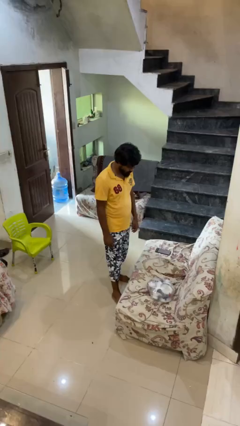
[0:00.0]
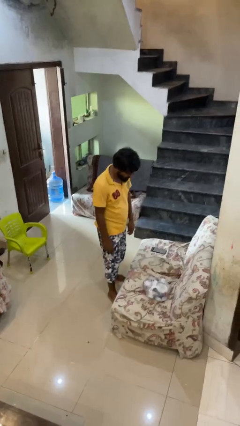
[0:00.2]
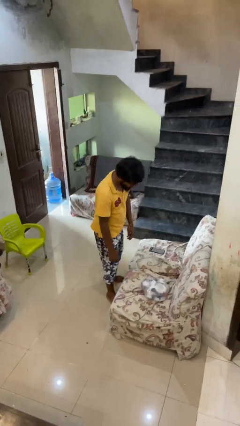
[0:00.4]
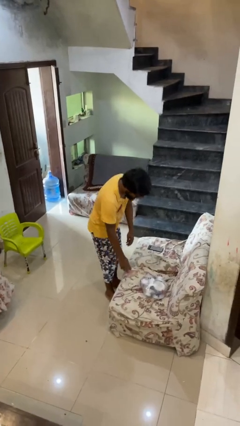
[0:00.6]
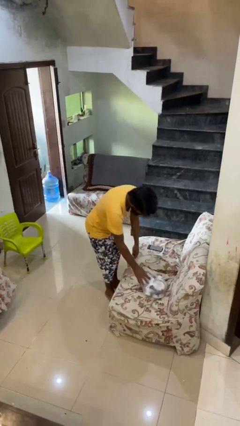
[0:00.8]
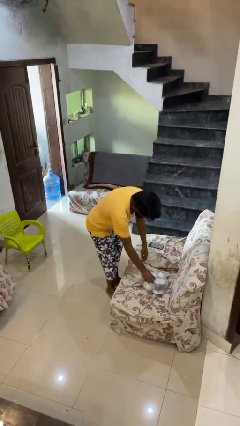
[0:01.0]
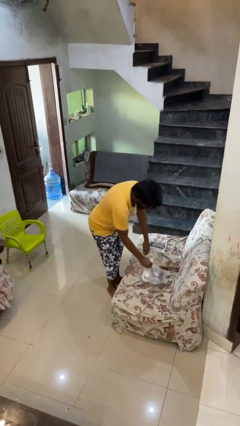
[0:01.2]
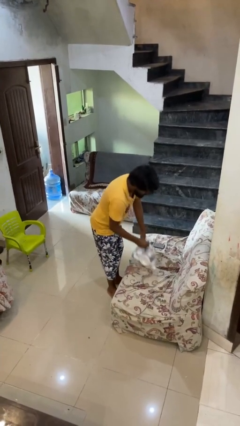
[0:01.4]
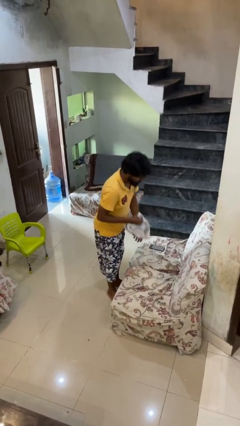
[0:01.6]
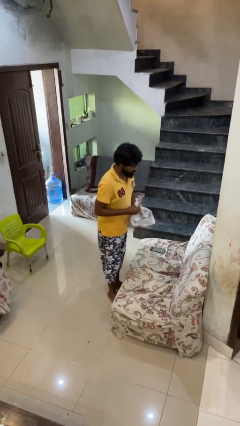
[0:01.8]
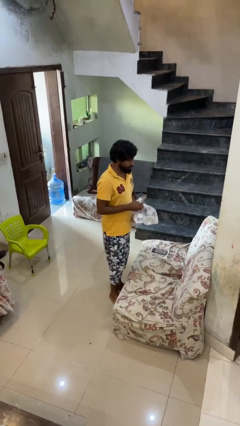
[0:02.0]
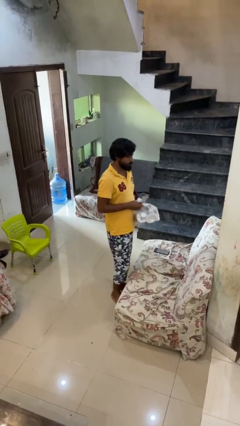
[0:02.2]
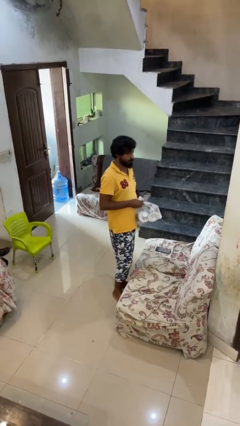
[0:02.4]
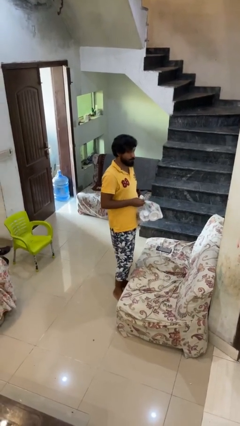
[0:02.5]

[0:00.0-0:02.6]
person picks up object from couch

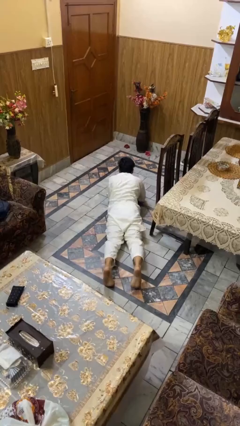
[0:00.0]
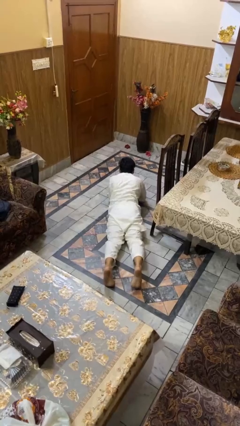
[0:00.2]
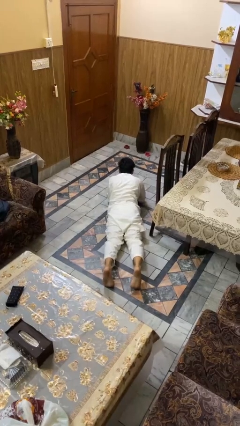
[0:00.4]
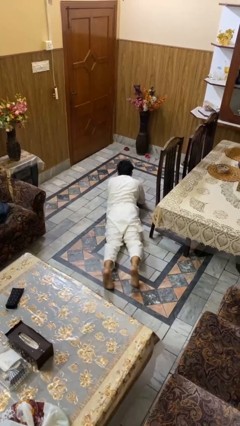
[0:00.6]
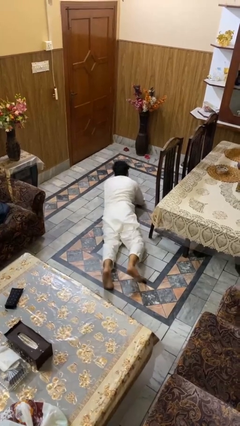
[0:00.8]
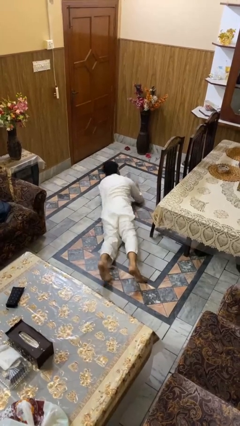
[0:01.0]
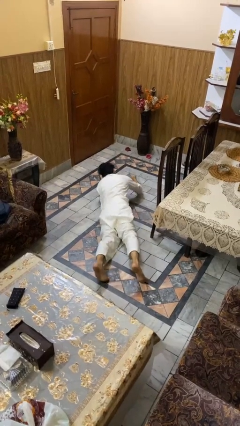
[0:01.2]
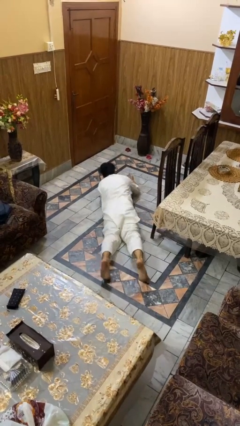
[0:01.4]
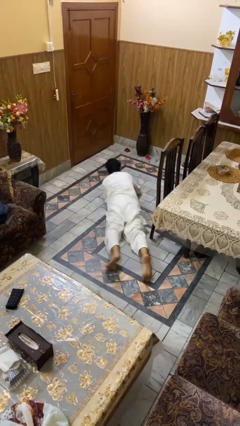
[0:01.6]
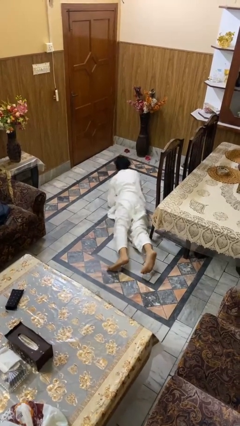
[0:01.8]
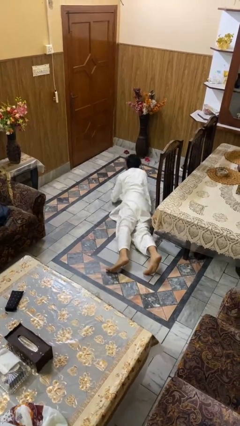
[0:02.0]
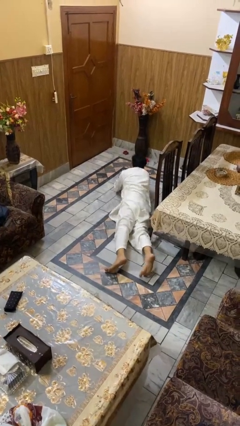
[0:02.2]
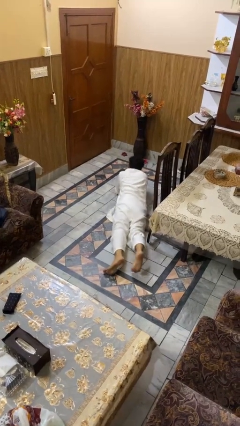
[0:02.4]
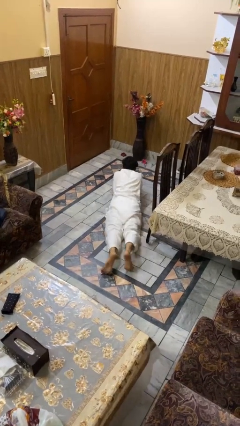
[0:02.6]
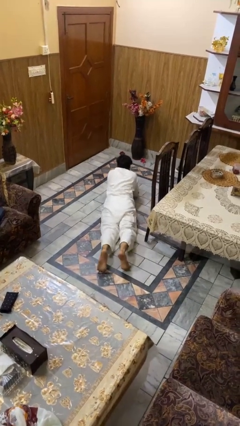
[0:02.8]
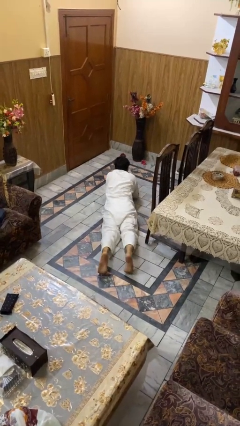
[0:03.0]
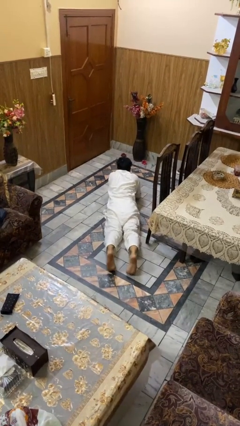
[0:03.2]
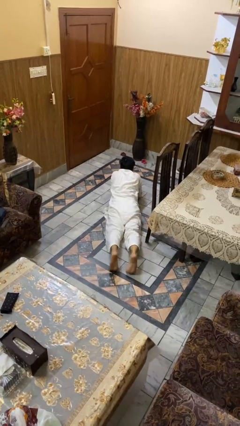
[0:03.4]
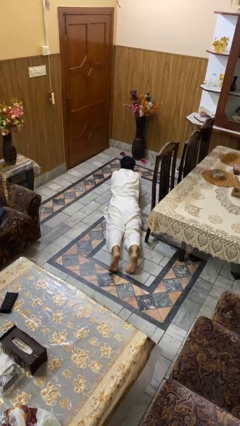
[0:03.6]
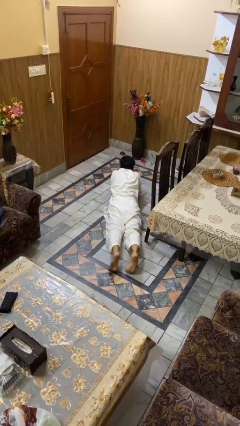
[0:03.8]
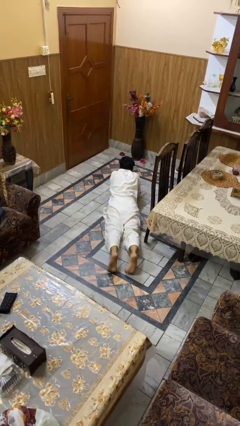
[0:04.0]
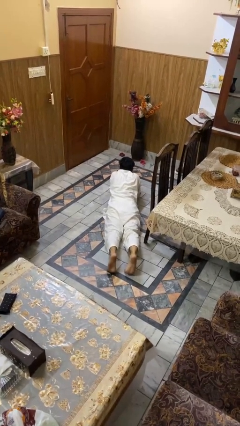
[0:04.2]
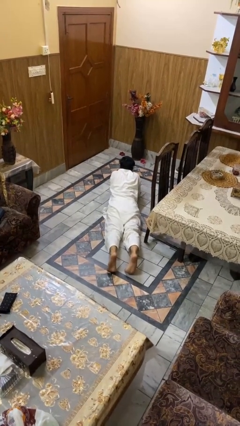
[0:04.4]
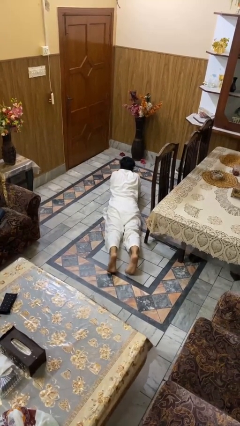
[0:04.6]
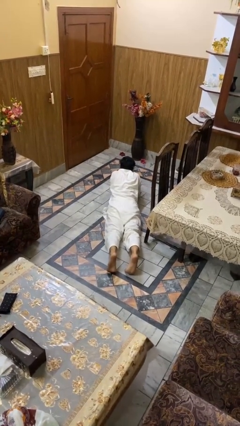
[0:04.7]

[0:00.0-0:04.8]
person crawls

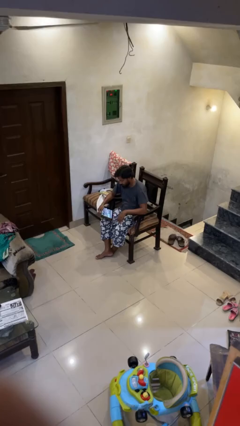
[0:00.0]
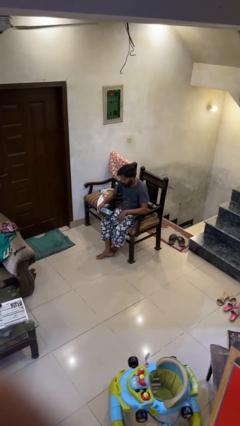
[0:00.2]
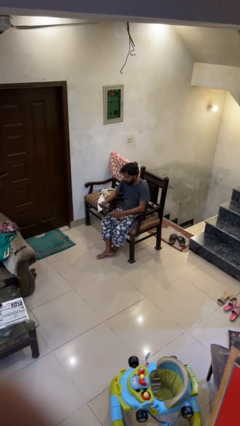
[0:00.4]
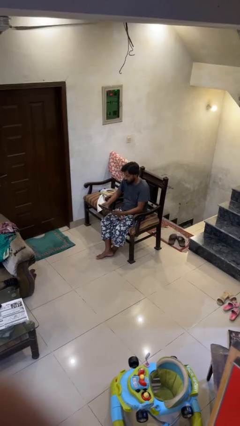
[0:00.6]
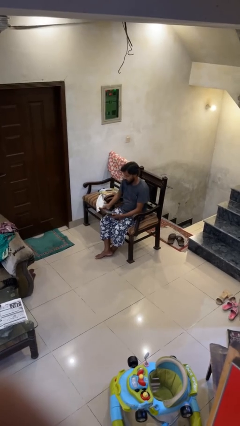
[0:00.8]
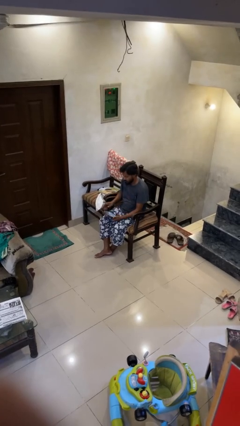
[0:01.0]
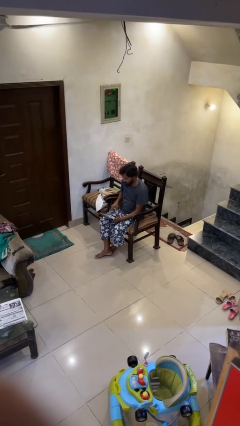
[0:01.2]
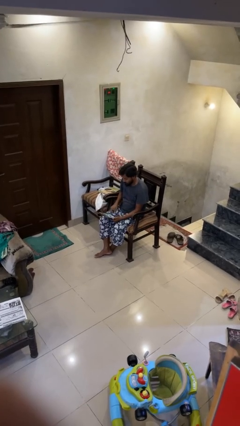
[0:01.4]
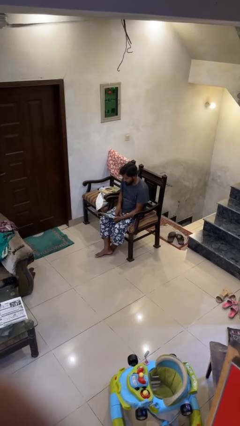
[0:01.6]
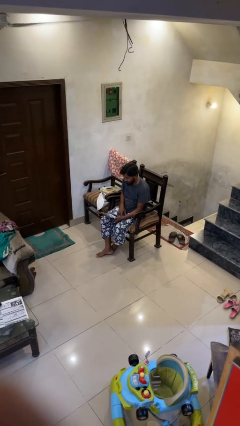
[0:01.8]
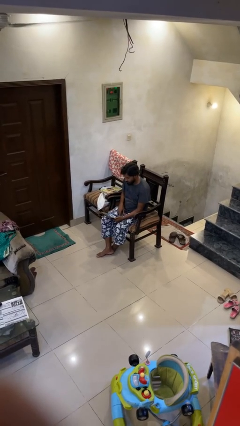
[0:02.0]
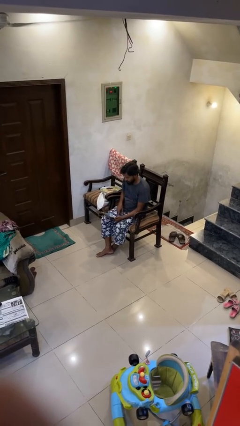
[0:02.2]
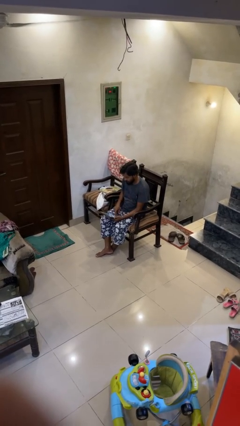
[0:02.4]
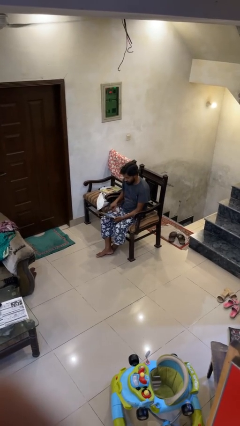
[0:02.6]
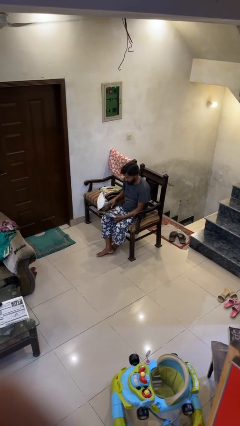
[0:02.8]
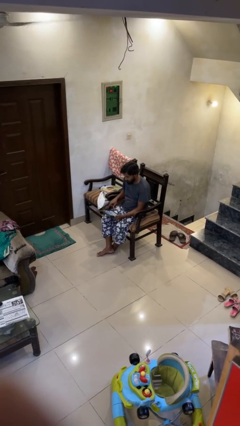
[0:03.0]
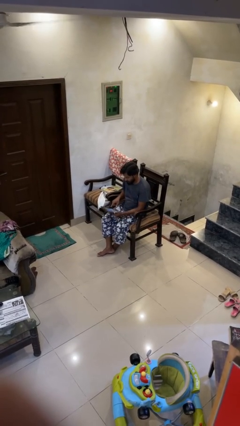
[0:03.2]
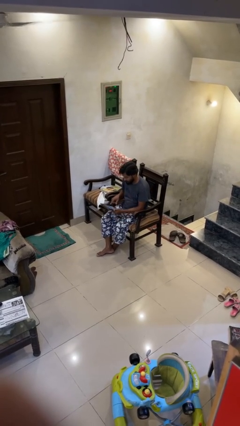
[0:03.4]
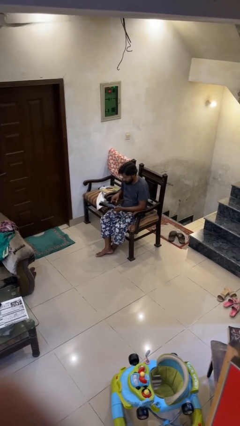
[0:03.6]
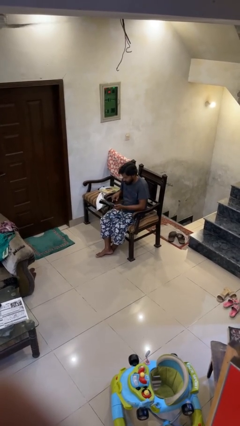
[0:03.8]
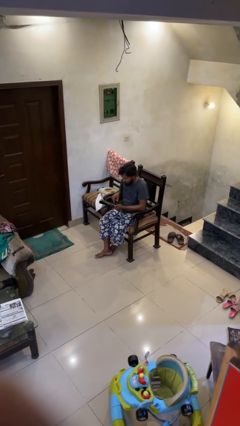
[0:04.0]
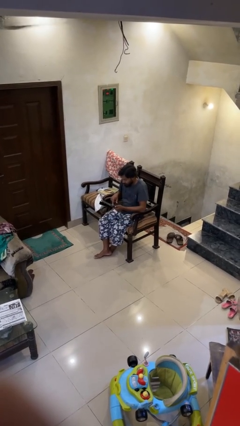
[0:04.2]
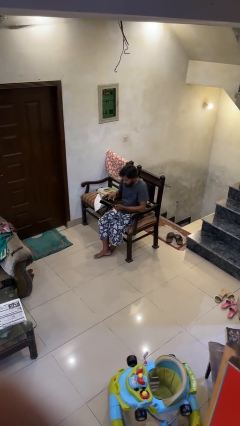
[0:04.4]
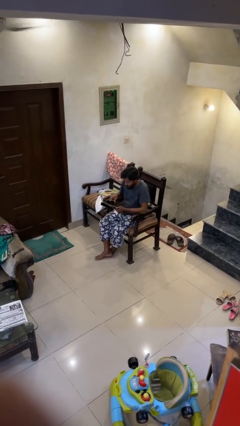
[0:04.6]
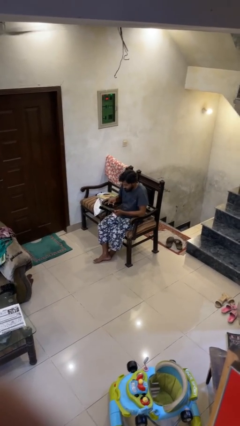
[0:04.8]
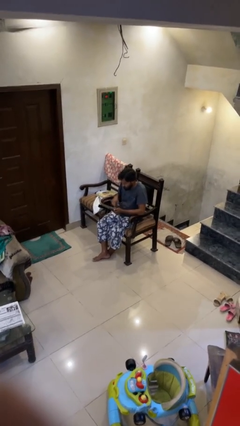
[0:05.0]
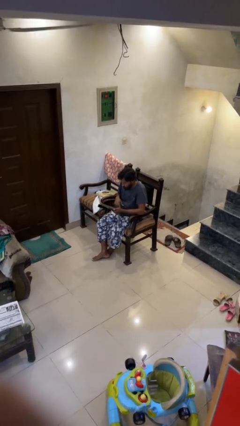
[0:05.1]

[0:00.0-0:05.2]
person interacts with tablet

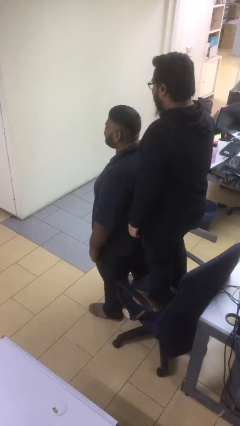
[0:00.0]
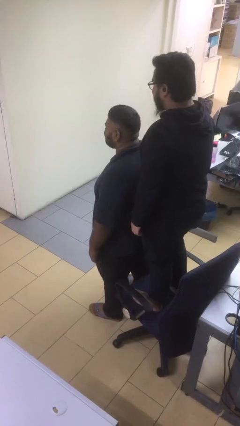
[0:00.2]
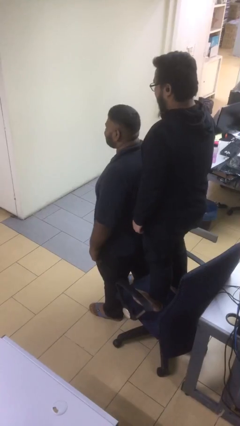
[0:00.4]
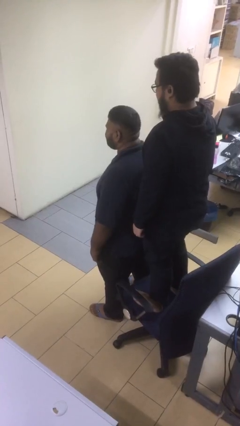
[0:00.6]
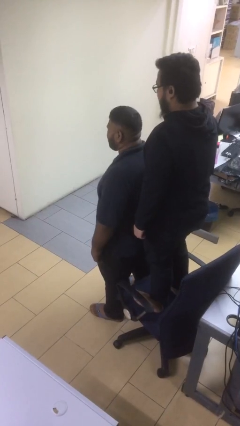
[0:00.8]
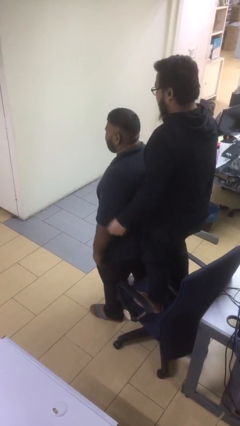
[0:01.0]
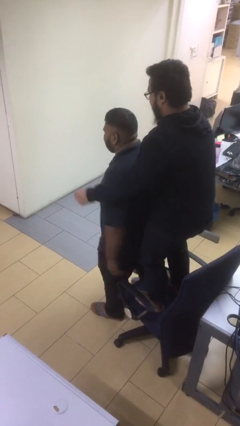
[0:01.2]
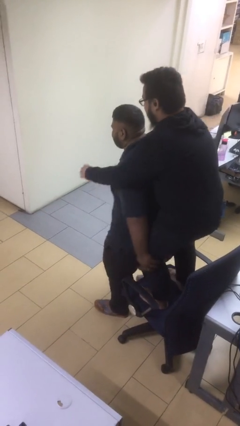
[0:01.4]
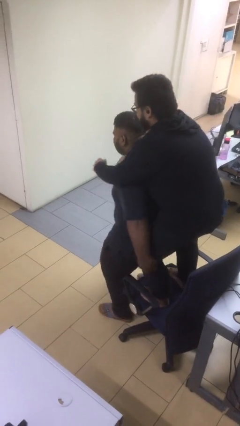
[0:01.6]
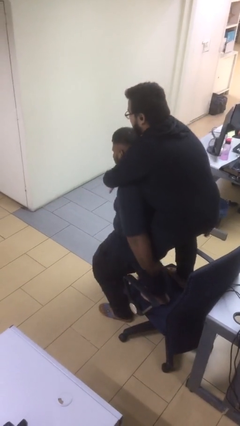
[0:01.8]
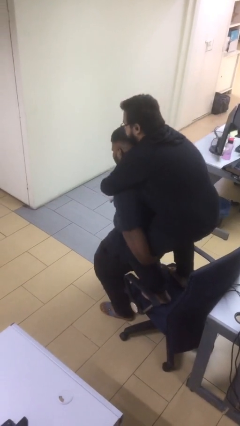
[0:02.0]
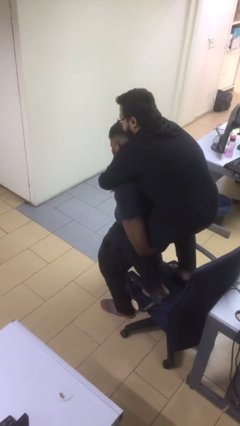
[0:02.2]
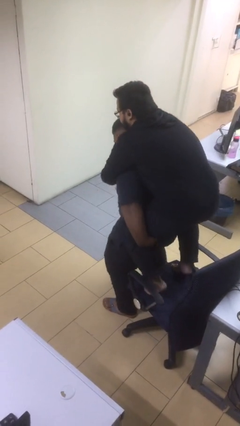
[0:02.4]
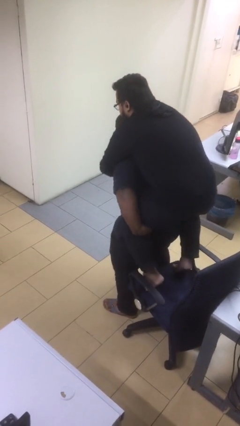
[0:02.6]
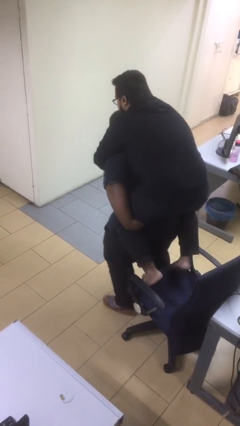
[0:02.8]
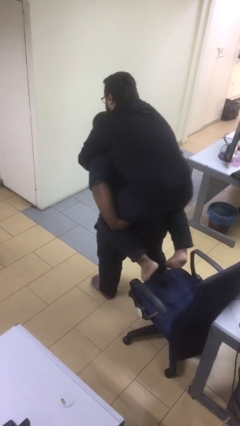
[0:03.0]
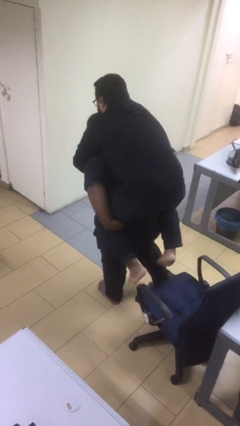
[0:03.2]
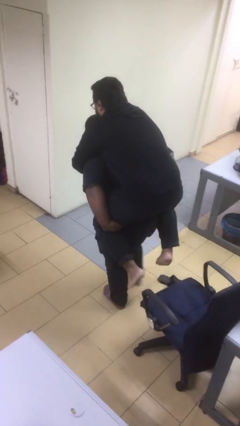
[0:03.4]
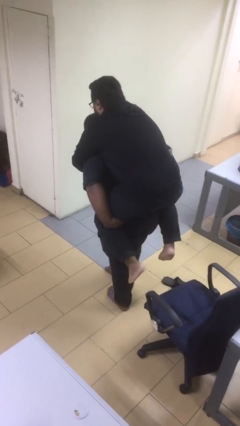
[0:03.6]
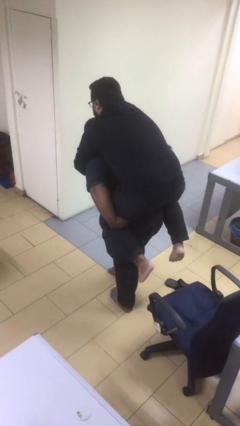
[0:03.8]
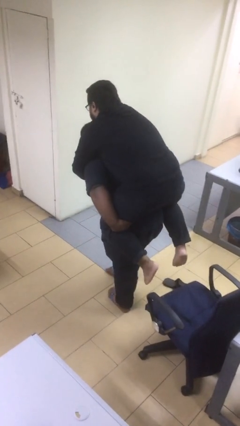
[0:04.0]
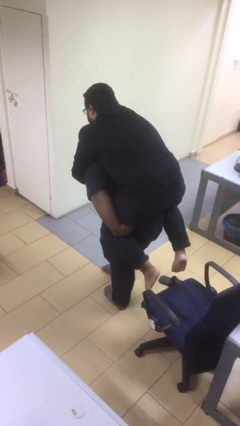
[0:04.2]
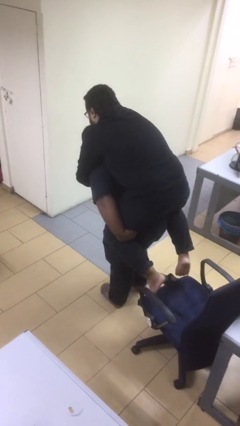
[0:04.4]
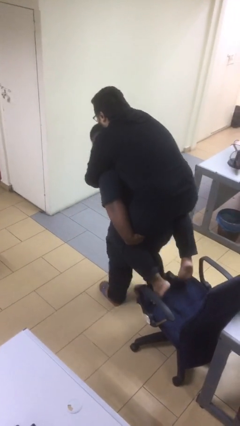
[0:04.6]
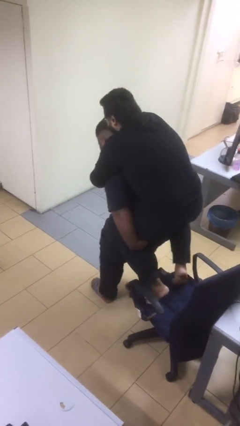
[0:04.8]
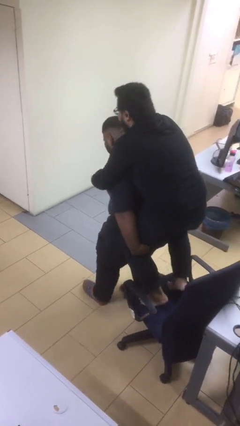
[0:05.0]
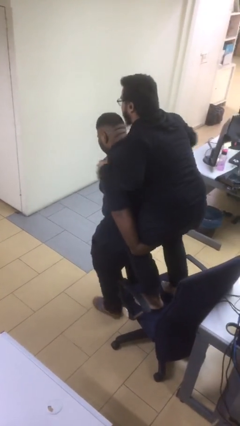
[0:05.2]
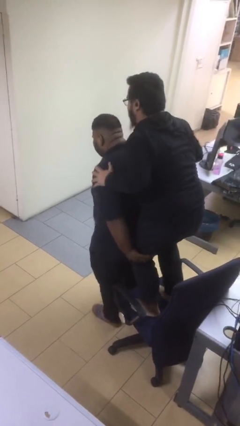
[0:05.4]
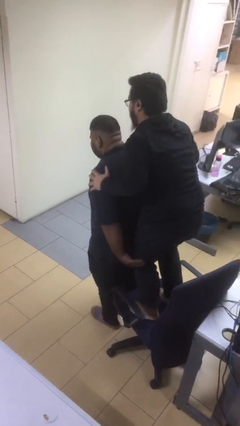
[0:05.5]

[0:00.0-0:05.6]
person carries person on back
